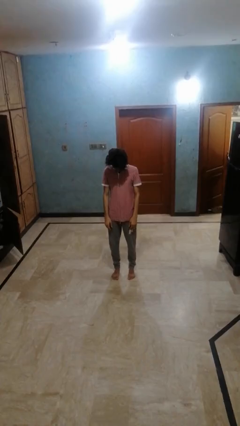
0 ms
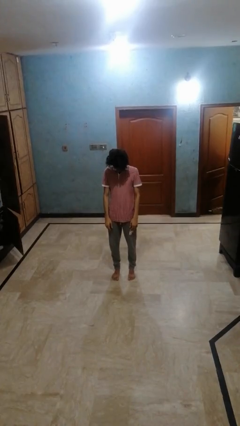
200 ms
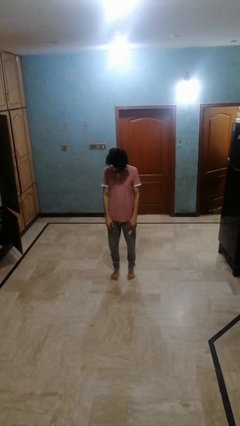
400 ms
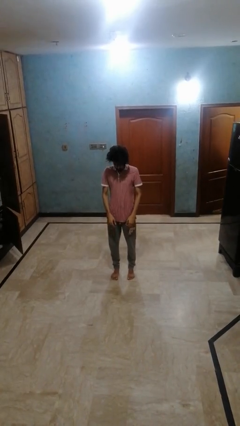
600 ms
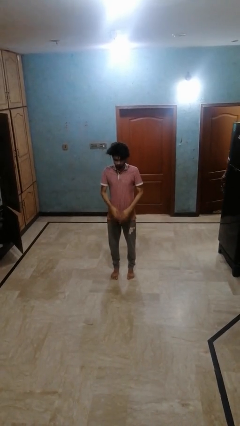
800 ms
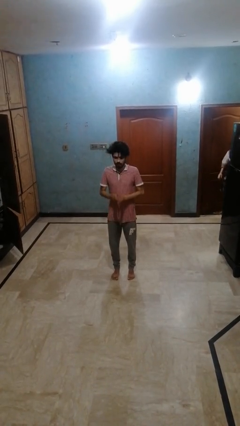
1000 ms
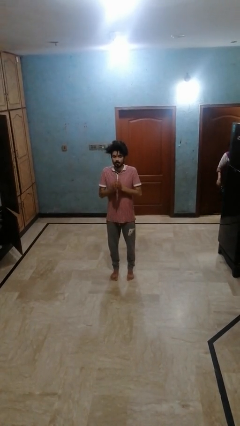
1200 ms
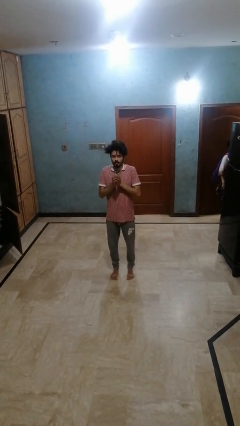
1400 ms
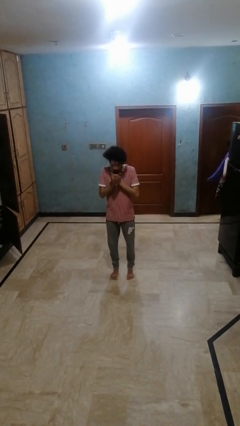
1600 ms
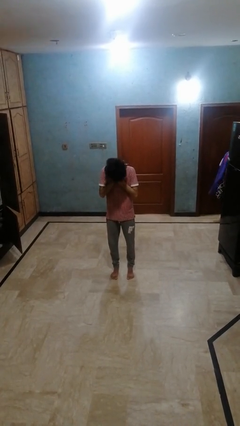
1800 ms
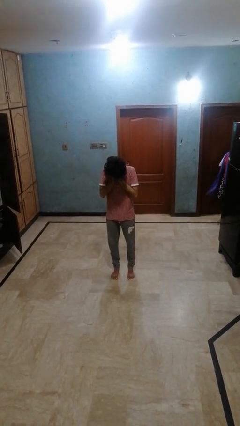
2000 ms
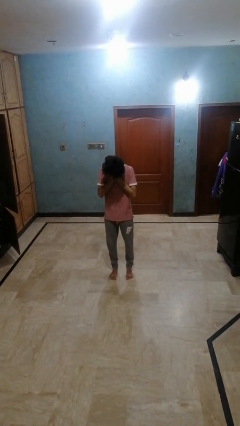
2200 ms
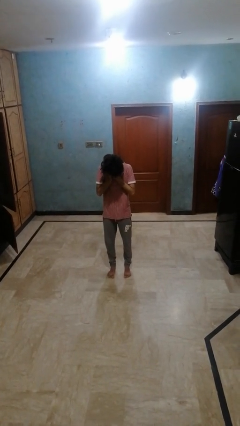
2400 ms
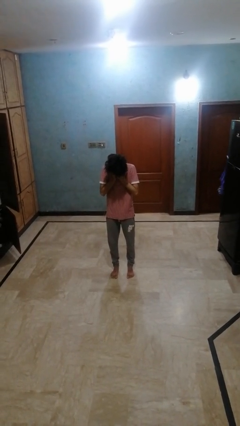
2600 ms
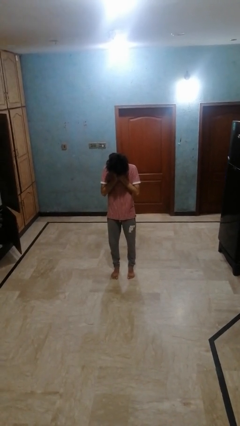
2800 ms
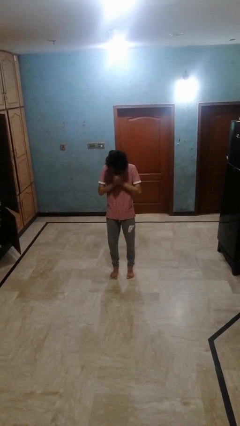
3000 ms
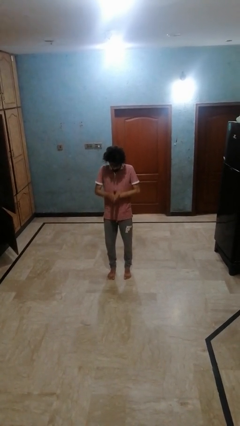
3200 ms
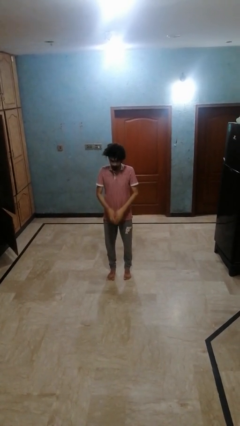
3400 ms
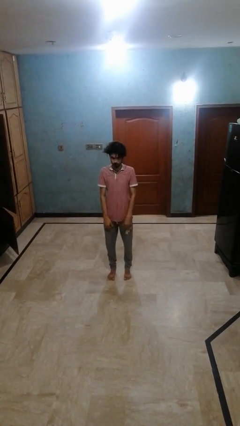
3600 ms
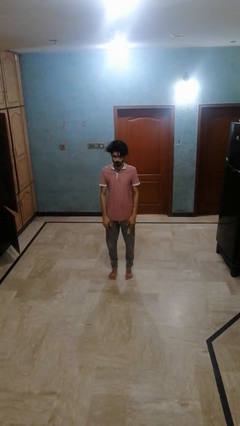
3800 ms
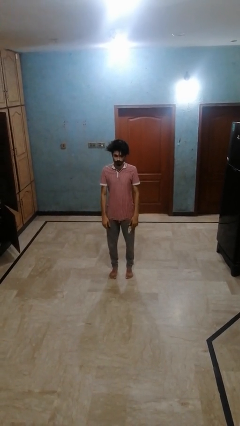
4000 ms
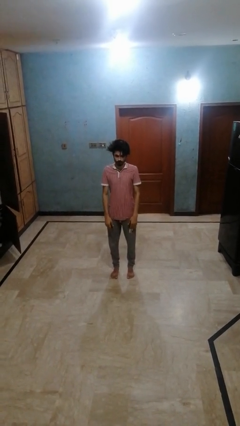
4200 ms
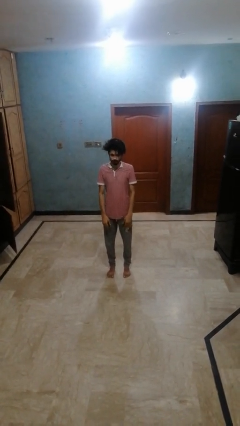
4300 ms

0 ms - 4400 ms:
person sneezes into hand

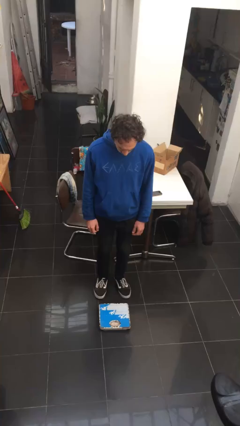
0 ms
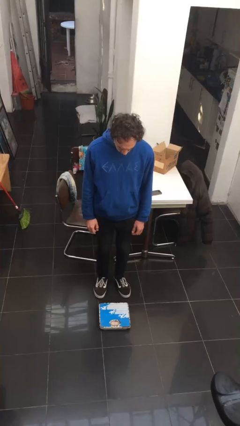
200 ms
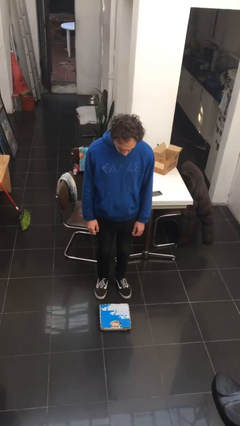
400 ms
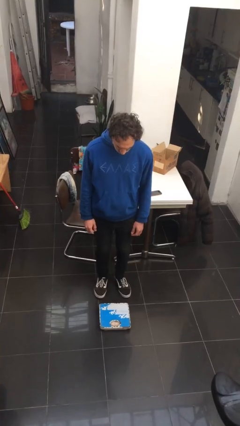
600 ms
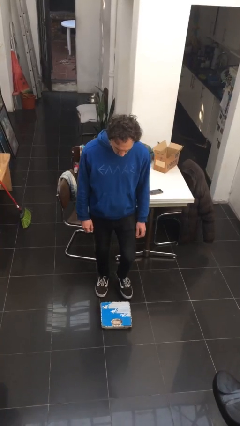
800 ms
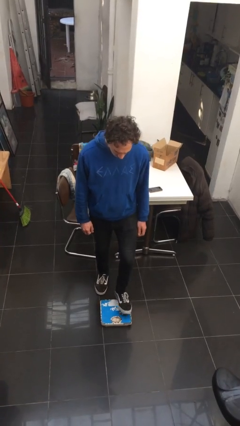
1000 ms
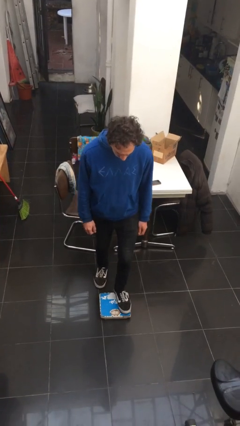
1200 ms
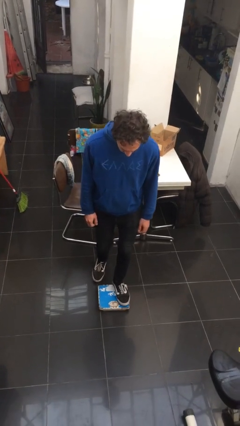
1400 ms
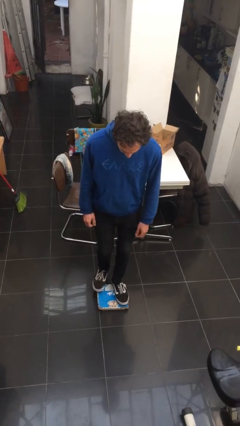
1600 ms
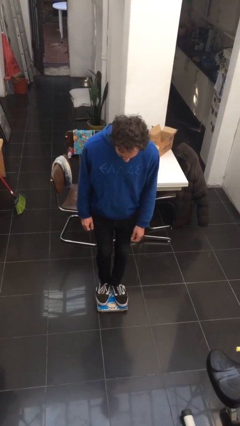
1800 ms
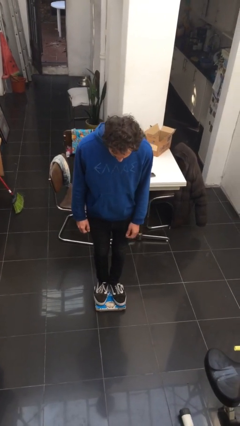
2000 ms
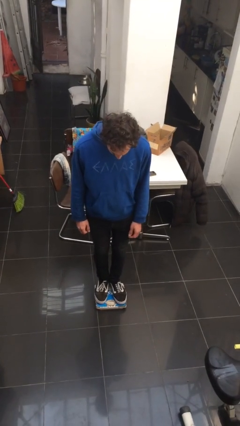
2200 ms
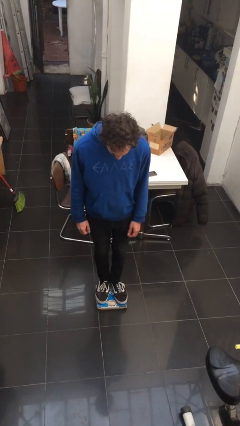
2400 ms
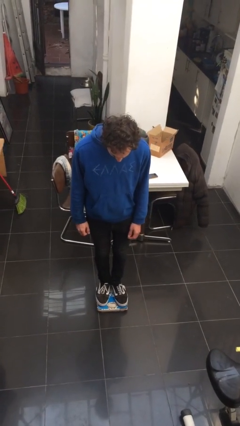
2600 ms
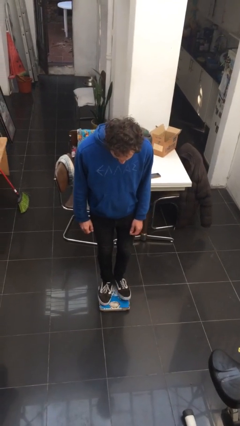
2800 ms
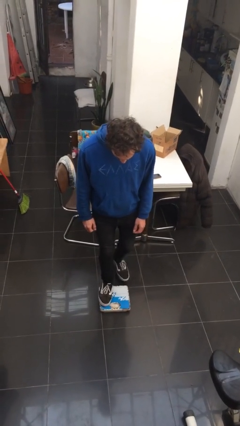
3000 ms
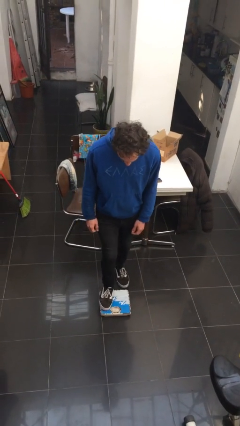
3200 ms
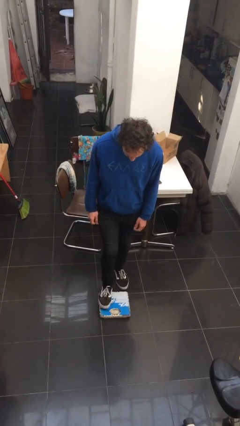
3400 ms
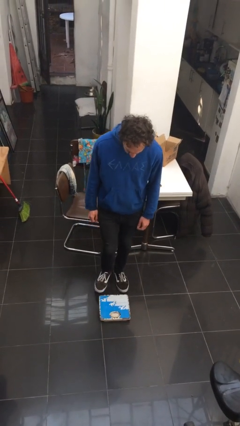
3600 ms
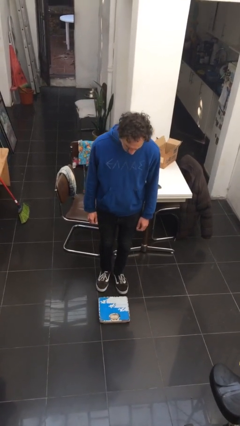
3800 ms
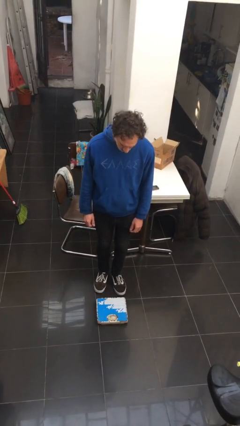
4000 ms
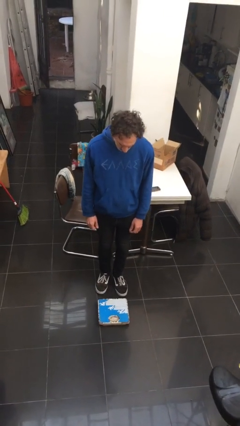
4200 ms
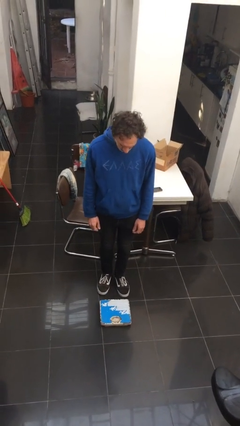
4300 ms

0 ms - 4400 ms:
person uses bodyweight scale

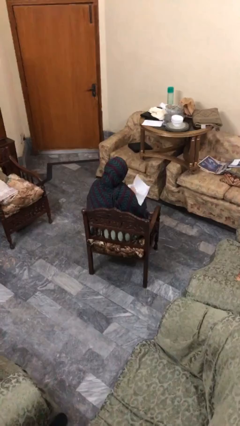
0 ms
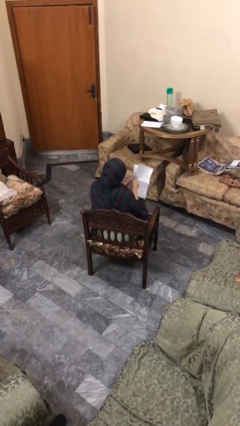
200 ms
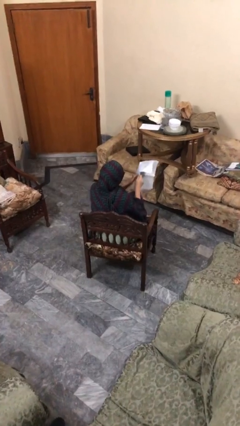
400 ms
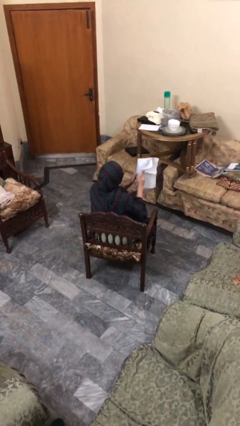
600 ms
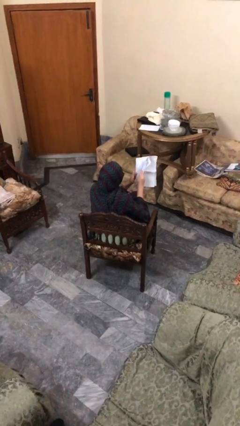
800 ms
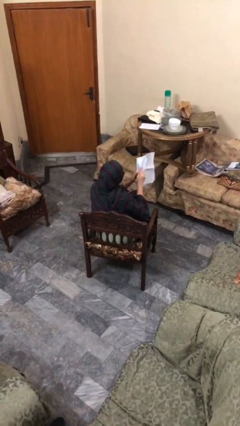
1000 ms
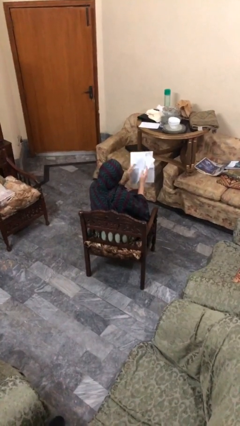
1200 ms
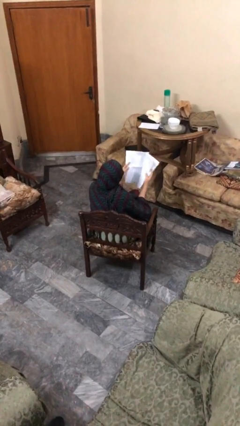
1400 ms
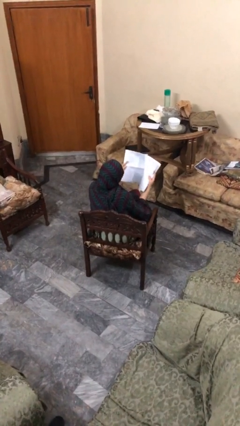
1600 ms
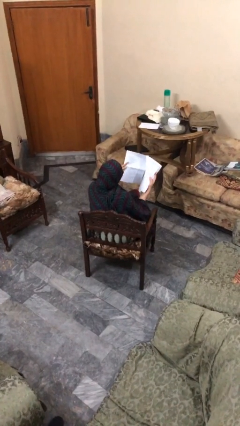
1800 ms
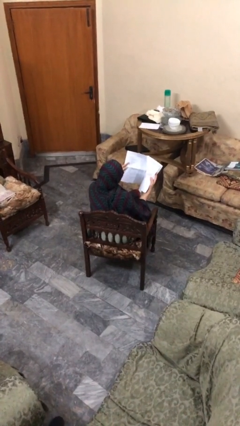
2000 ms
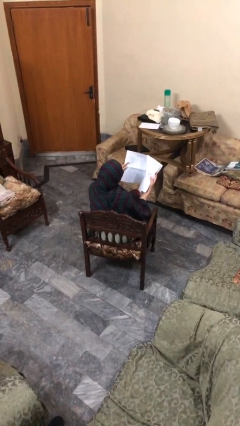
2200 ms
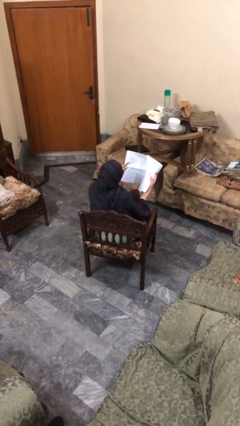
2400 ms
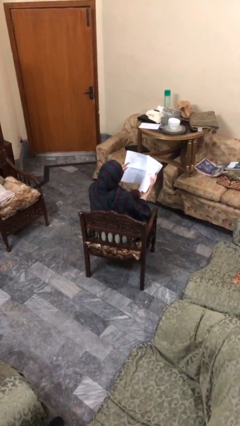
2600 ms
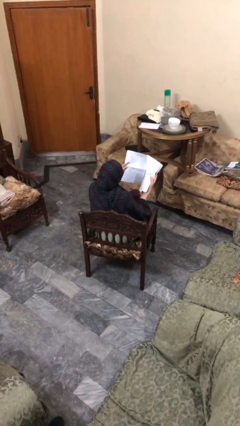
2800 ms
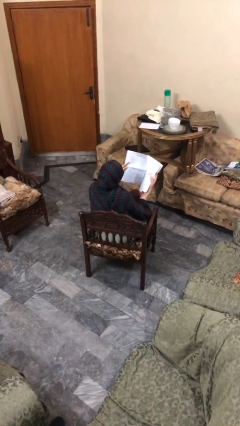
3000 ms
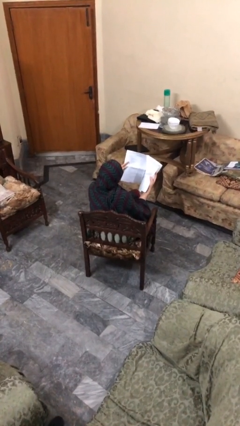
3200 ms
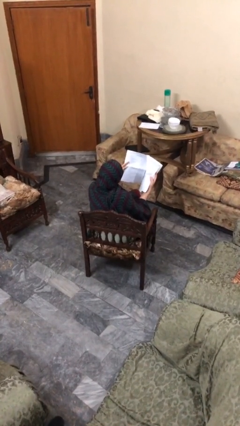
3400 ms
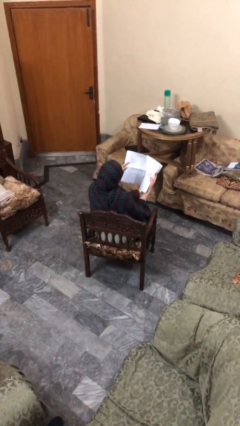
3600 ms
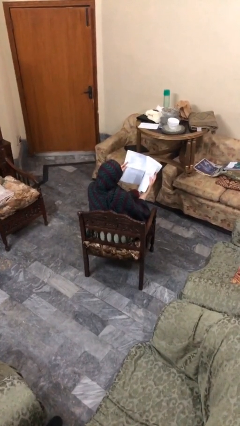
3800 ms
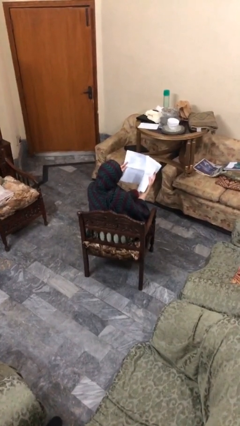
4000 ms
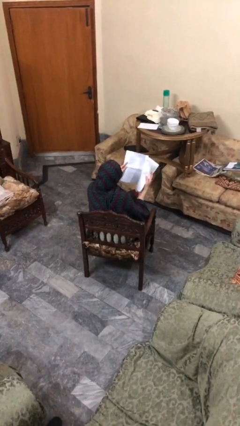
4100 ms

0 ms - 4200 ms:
person reads magazine

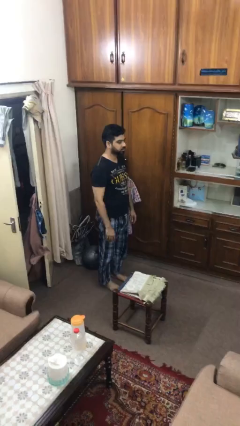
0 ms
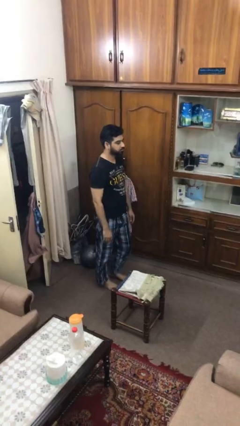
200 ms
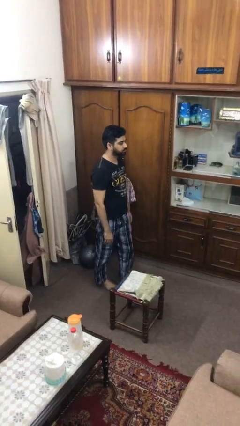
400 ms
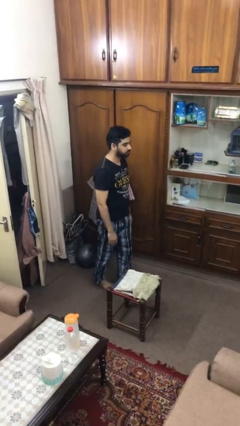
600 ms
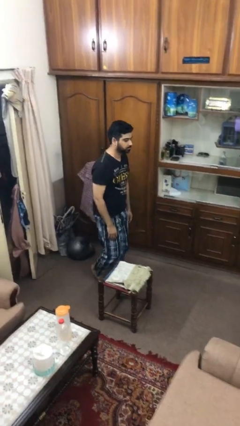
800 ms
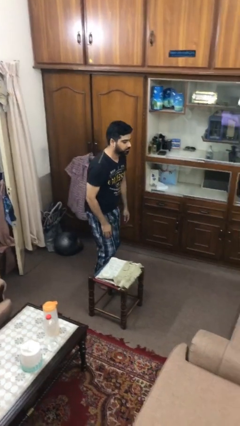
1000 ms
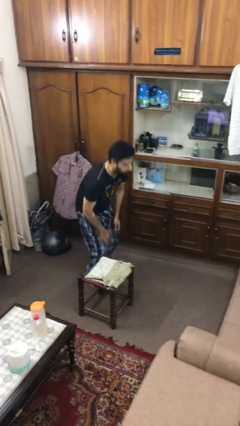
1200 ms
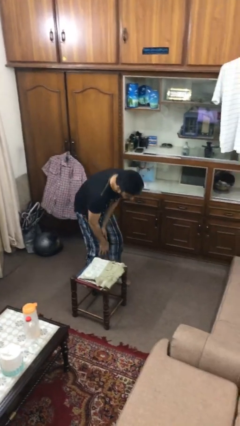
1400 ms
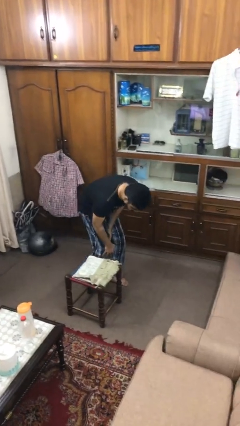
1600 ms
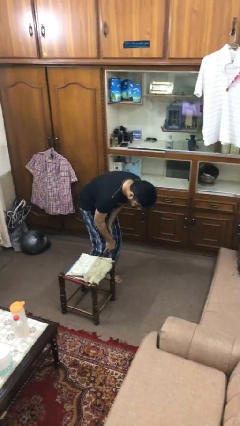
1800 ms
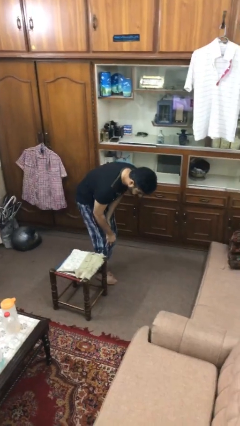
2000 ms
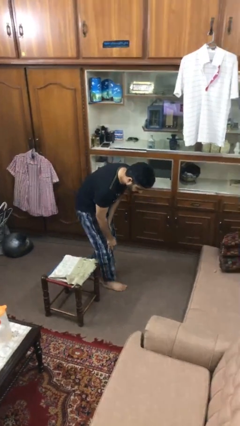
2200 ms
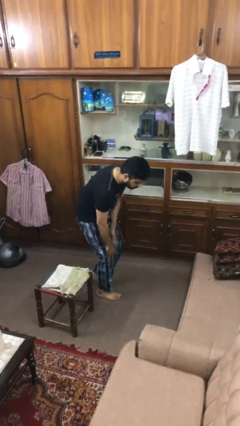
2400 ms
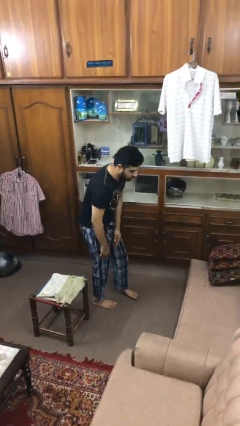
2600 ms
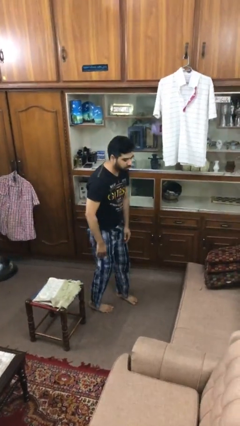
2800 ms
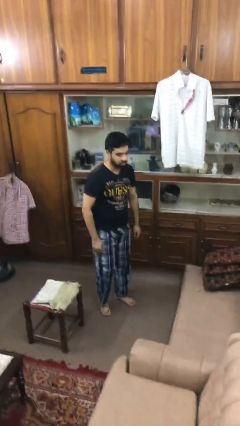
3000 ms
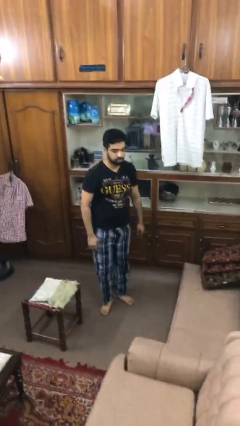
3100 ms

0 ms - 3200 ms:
person bumps into table

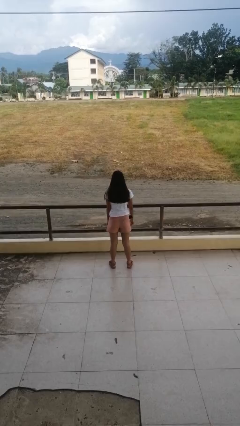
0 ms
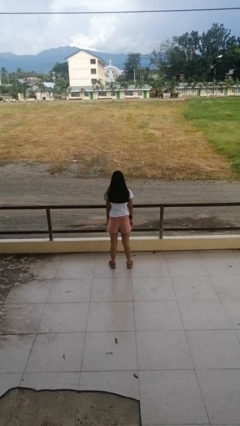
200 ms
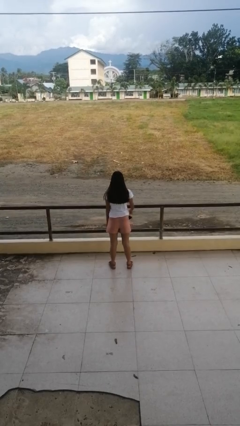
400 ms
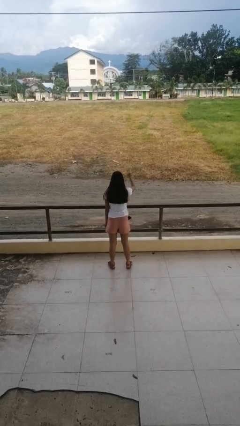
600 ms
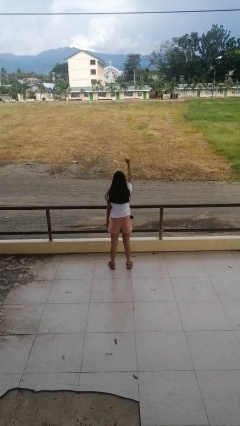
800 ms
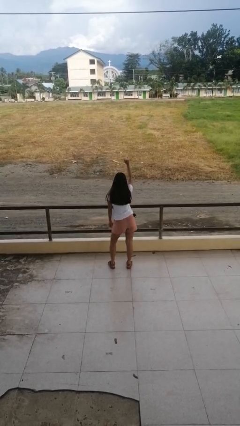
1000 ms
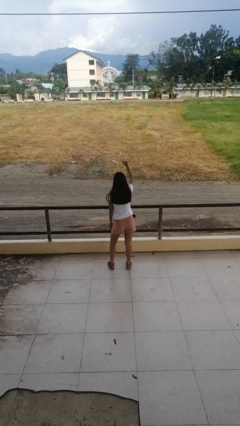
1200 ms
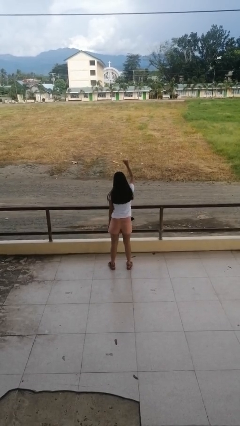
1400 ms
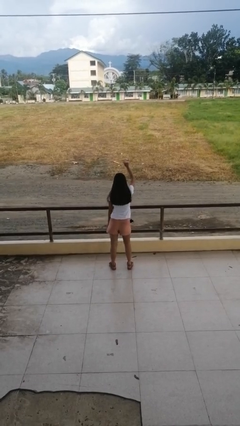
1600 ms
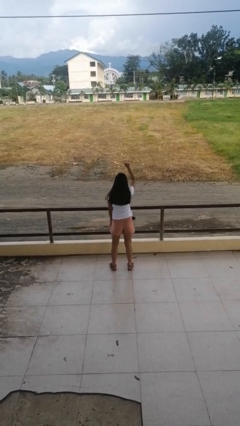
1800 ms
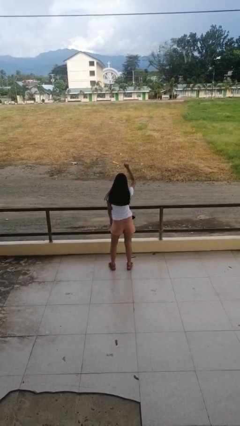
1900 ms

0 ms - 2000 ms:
person dances in place
